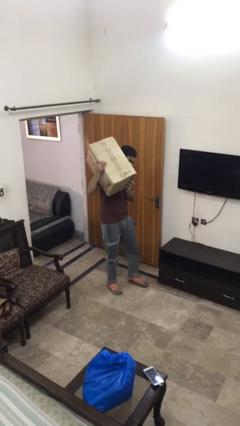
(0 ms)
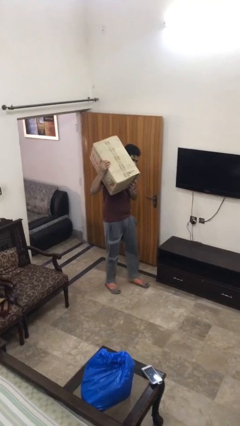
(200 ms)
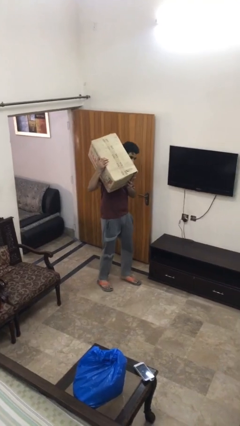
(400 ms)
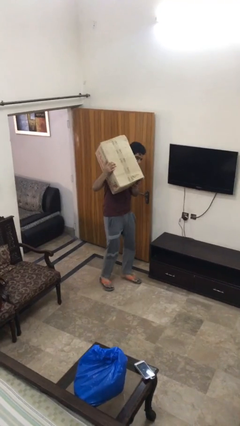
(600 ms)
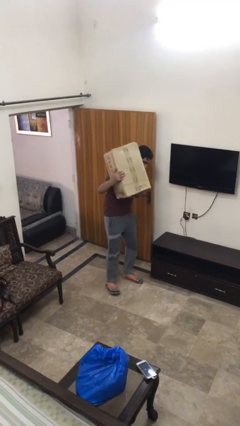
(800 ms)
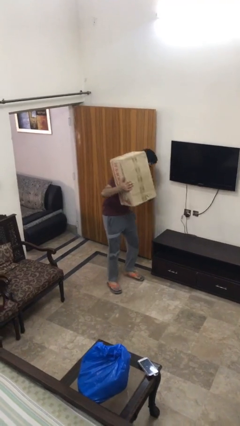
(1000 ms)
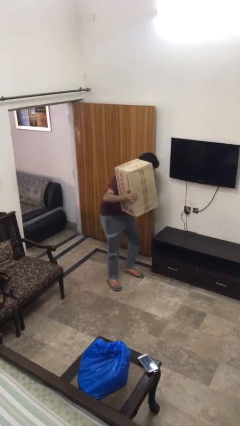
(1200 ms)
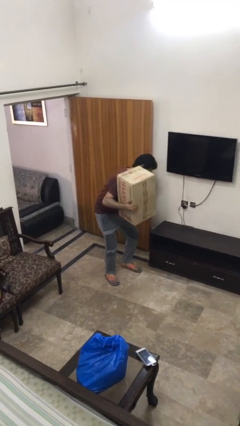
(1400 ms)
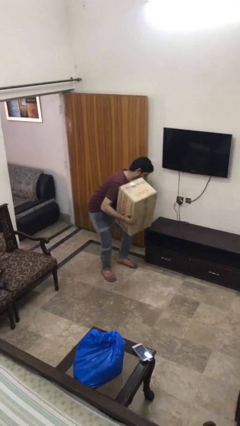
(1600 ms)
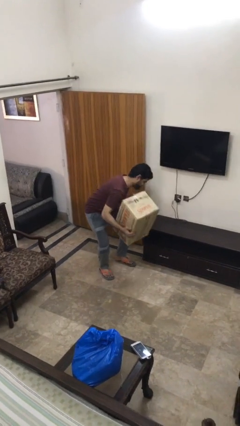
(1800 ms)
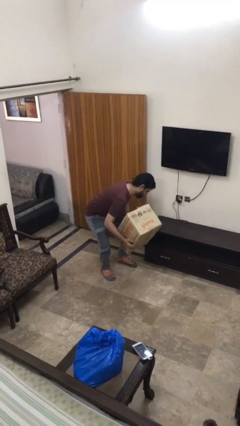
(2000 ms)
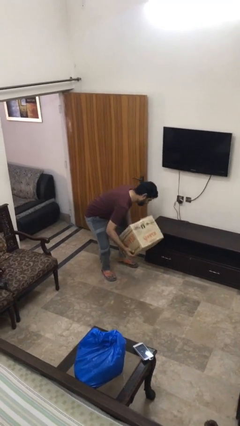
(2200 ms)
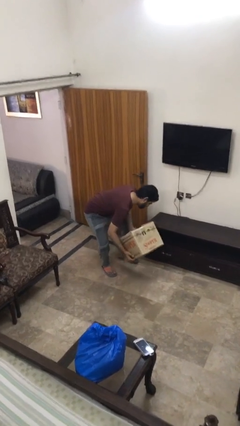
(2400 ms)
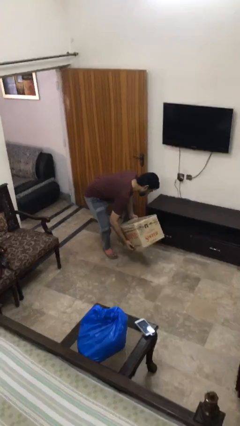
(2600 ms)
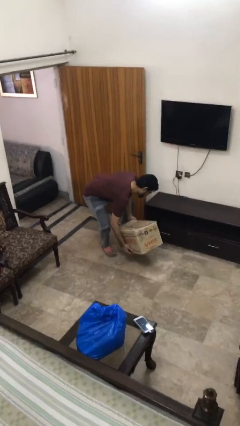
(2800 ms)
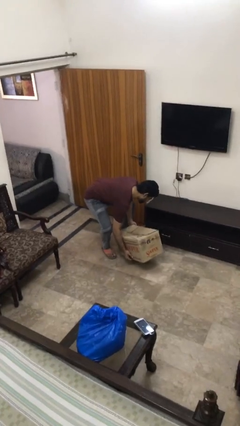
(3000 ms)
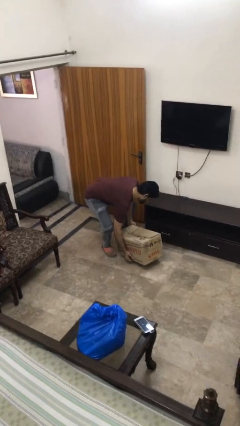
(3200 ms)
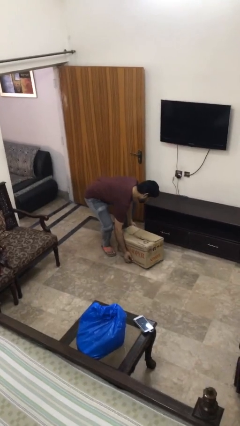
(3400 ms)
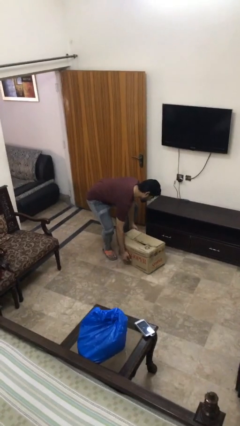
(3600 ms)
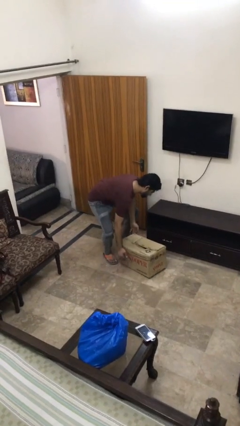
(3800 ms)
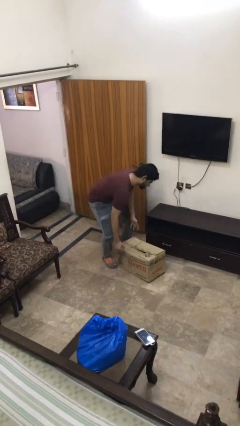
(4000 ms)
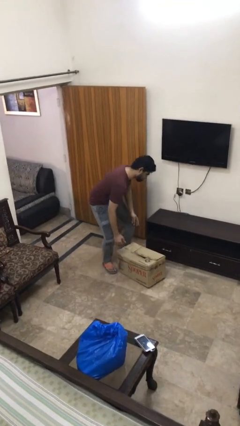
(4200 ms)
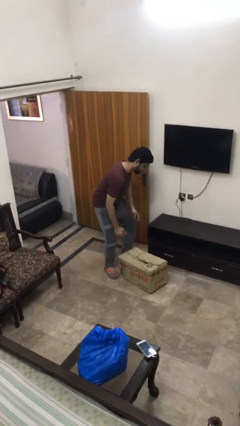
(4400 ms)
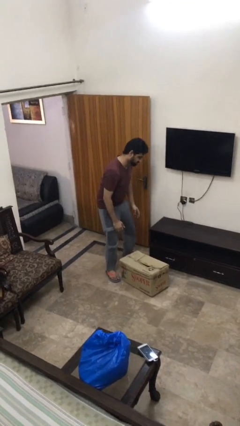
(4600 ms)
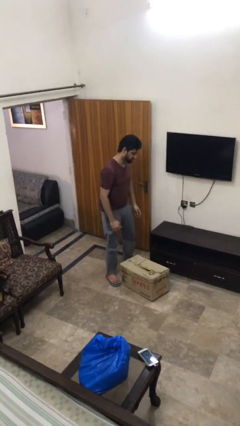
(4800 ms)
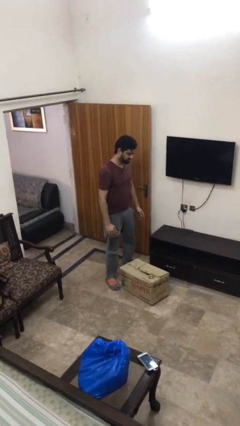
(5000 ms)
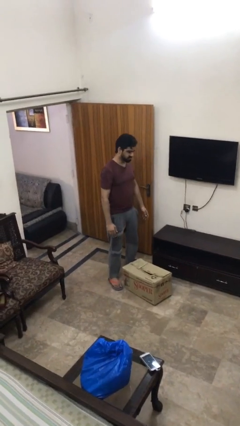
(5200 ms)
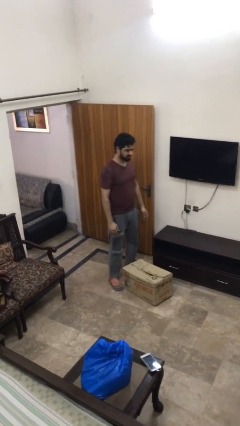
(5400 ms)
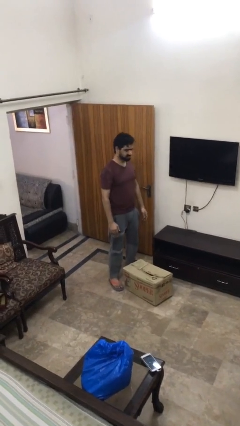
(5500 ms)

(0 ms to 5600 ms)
person puts down object on floor

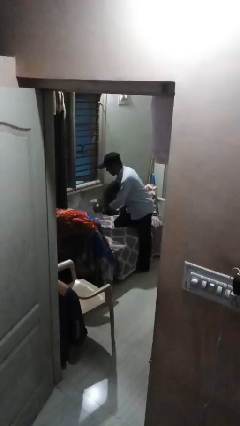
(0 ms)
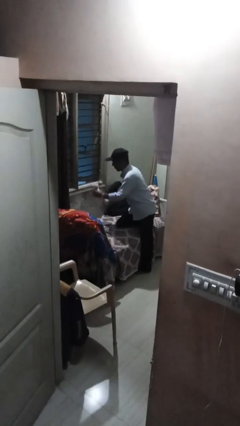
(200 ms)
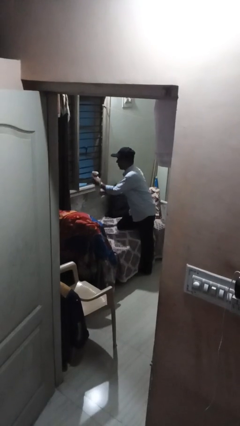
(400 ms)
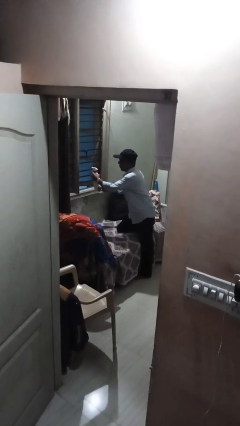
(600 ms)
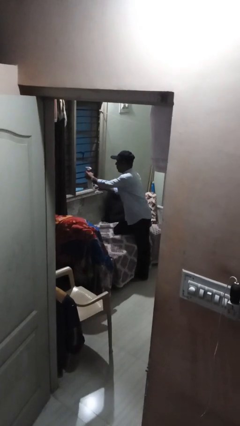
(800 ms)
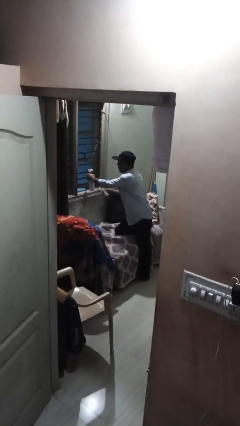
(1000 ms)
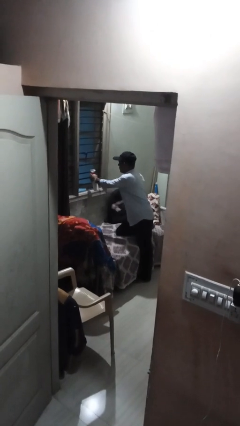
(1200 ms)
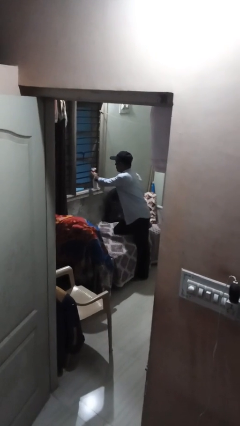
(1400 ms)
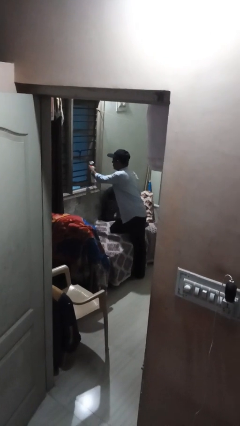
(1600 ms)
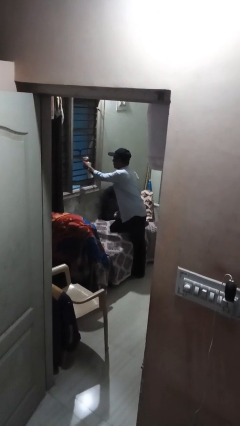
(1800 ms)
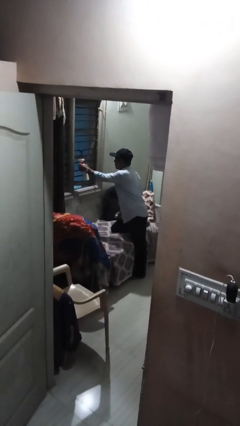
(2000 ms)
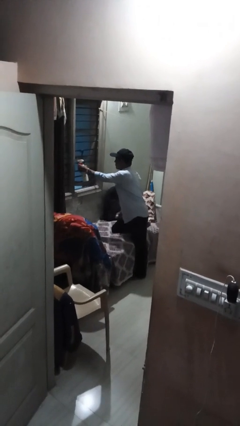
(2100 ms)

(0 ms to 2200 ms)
person sprays from bottle

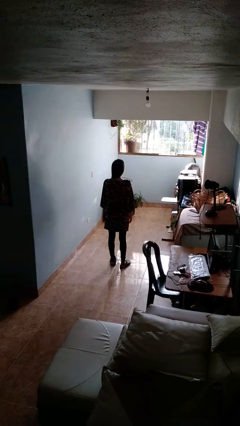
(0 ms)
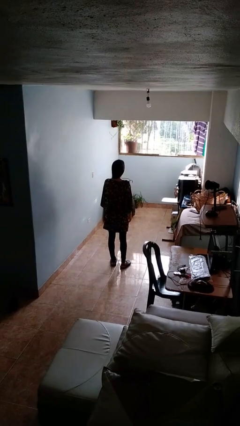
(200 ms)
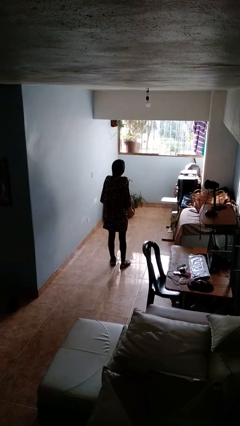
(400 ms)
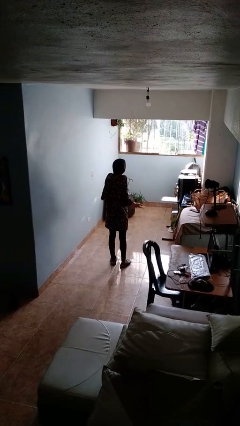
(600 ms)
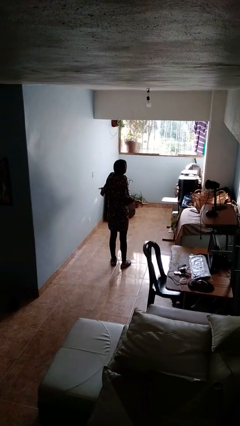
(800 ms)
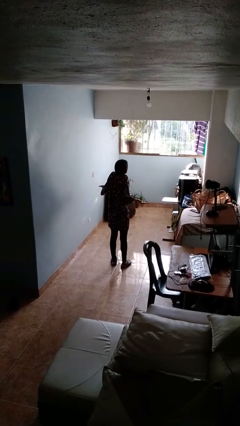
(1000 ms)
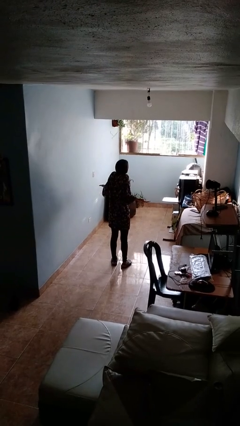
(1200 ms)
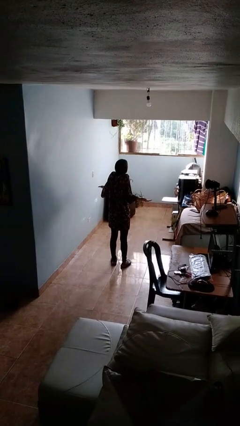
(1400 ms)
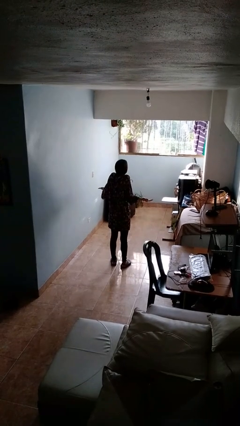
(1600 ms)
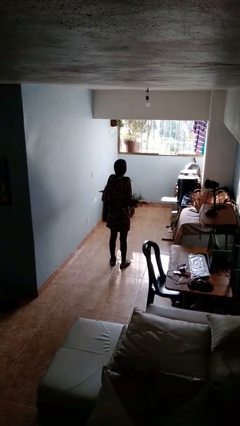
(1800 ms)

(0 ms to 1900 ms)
person shrugs

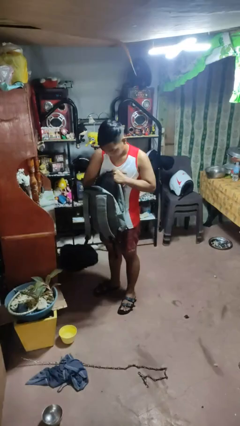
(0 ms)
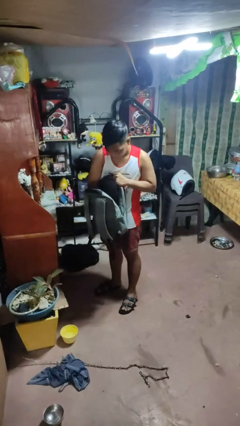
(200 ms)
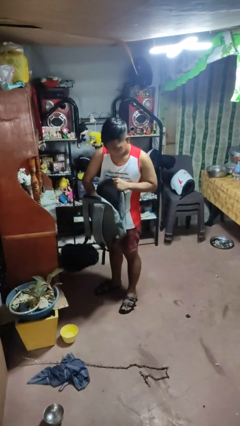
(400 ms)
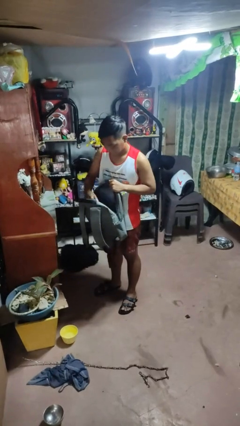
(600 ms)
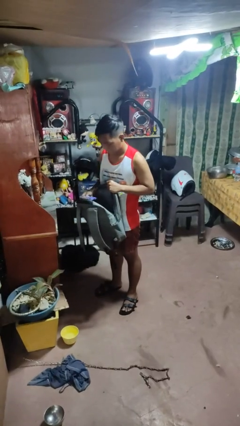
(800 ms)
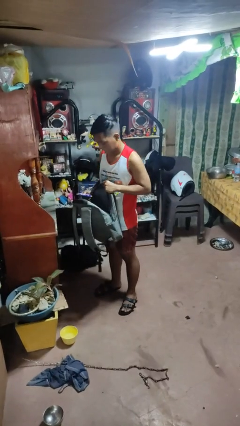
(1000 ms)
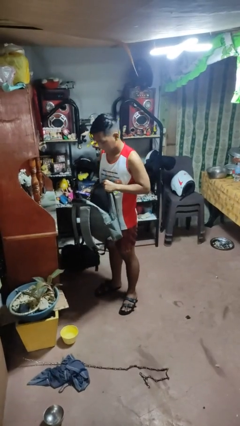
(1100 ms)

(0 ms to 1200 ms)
person takes object from bag

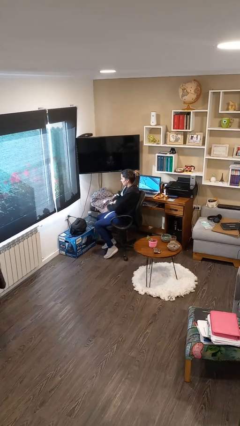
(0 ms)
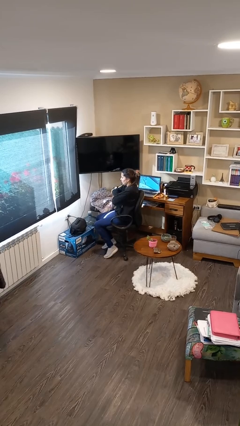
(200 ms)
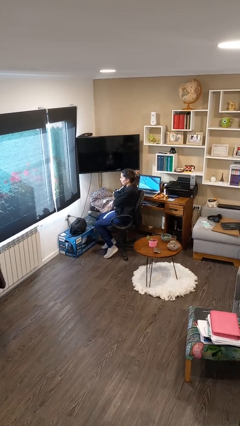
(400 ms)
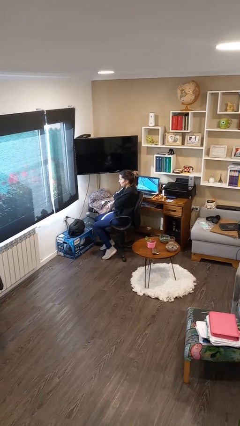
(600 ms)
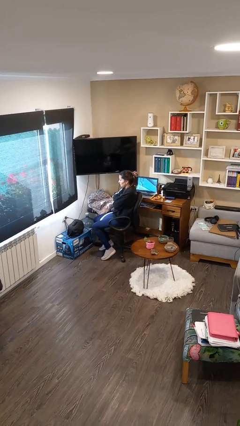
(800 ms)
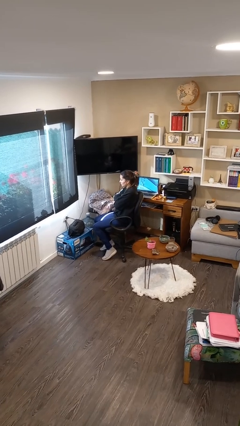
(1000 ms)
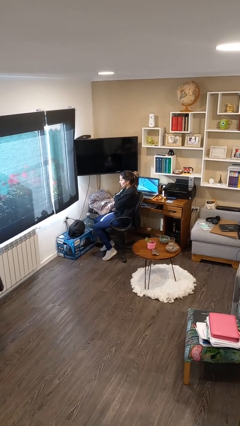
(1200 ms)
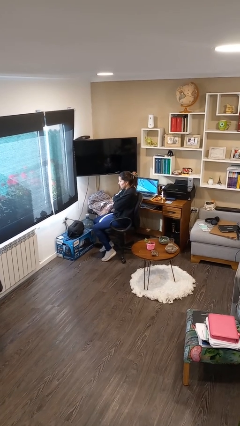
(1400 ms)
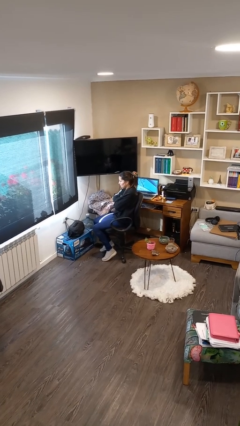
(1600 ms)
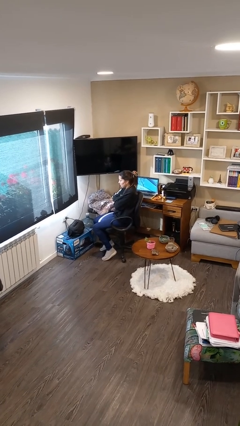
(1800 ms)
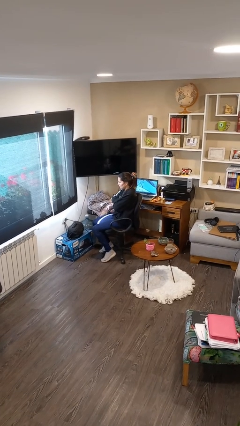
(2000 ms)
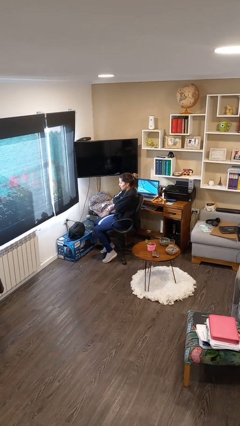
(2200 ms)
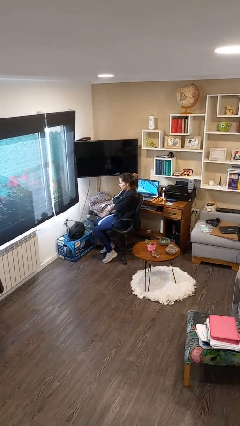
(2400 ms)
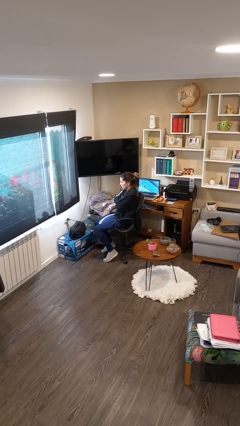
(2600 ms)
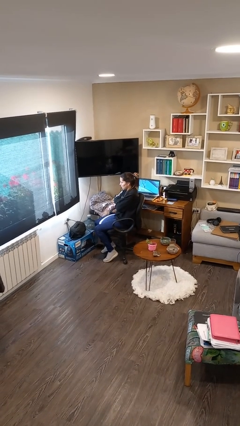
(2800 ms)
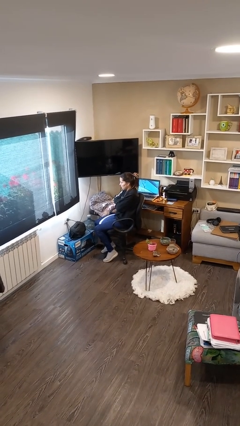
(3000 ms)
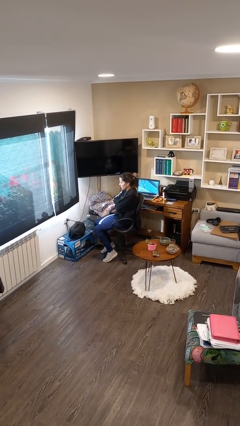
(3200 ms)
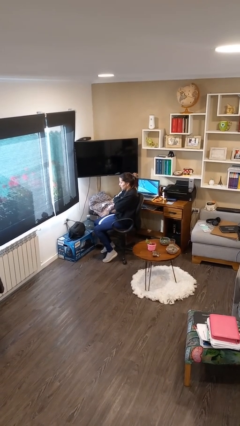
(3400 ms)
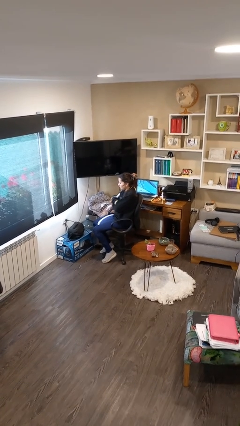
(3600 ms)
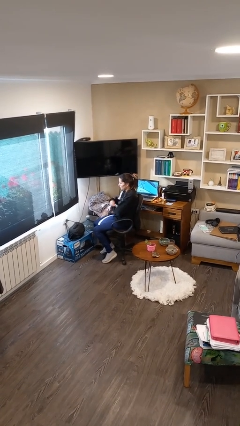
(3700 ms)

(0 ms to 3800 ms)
person crosses arms

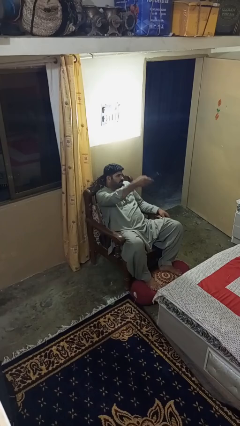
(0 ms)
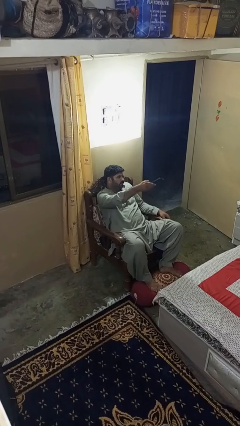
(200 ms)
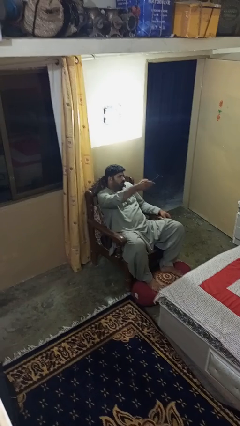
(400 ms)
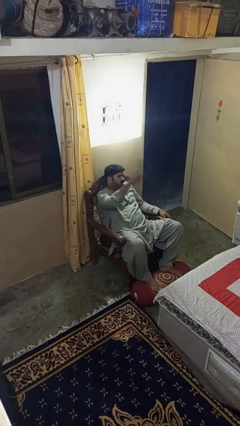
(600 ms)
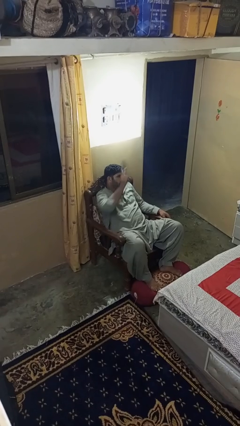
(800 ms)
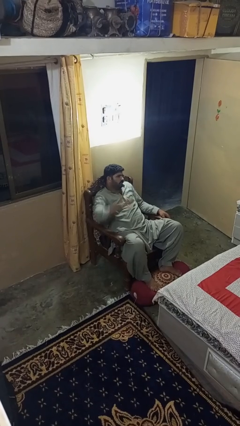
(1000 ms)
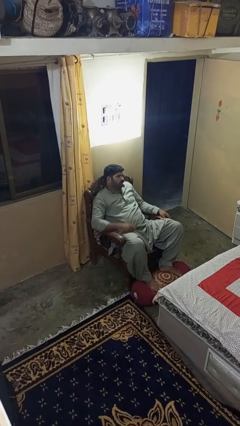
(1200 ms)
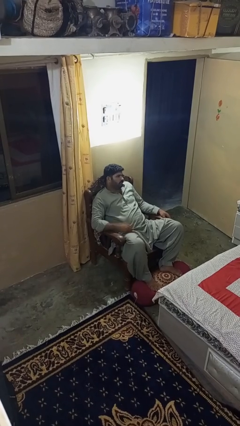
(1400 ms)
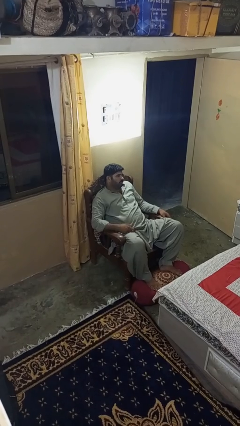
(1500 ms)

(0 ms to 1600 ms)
person uses television remote

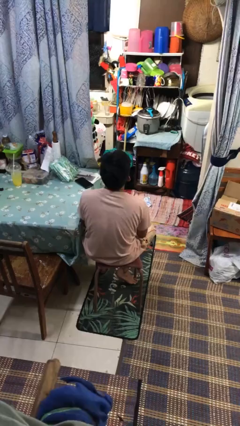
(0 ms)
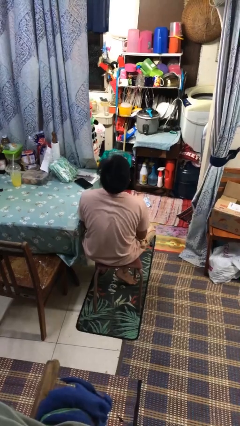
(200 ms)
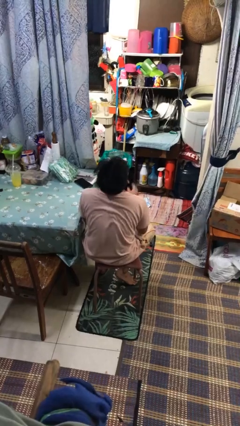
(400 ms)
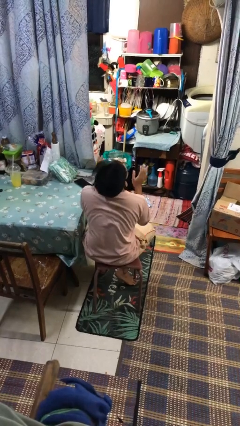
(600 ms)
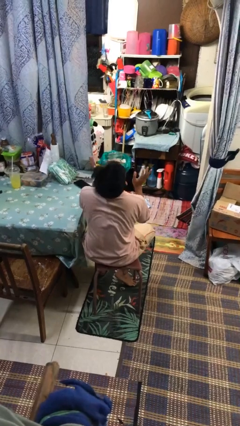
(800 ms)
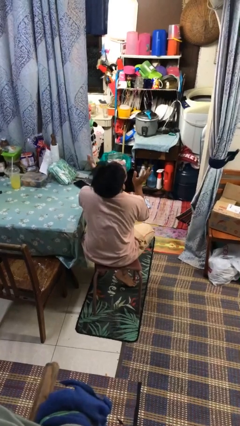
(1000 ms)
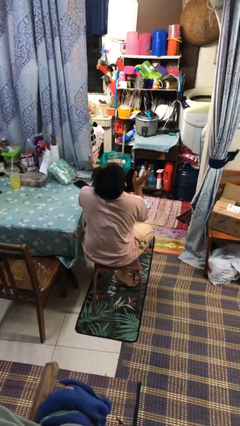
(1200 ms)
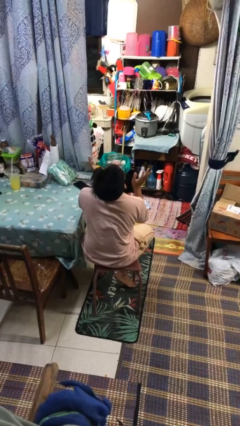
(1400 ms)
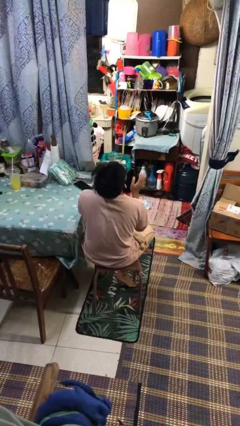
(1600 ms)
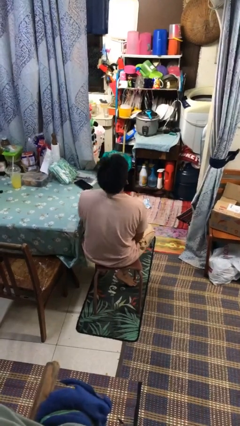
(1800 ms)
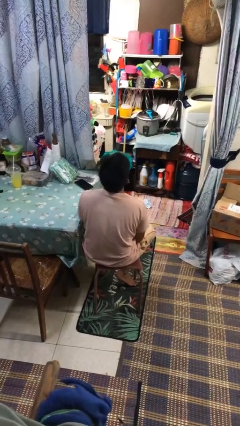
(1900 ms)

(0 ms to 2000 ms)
person sticks out tongue
